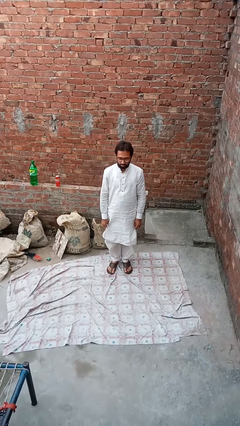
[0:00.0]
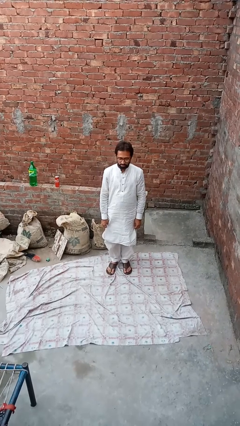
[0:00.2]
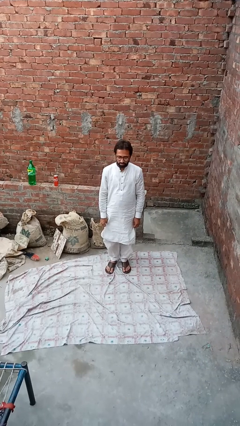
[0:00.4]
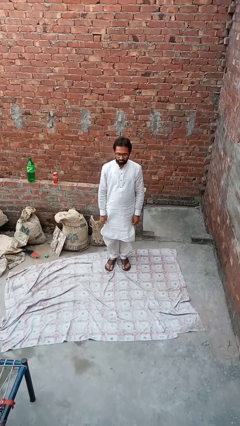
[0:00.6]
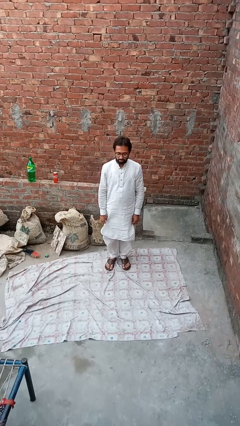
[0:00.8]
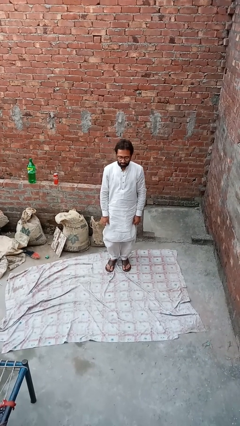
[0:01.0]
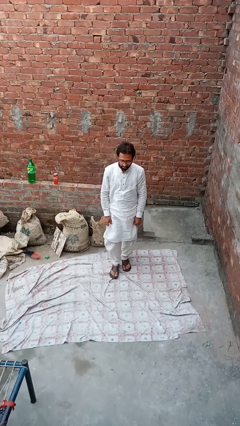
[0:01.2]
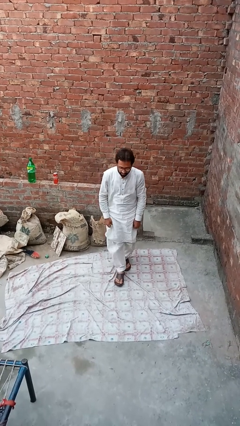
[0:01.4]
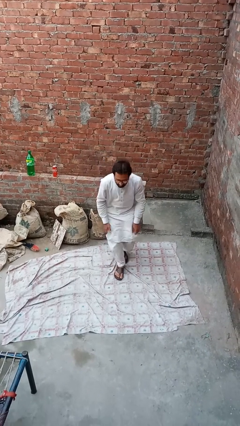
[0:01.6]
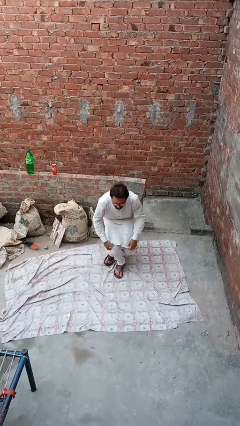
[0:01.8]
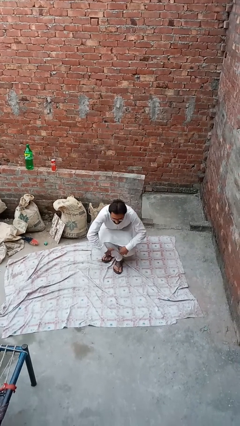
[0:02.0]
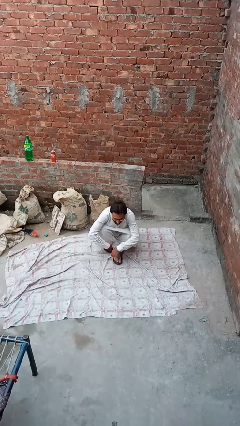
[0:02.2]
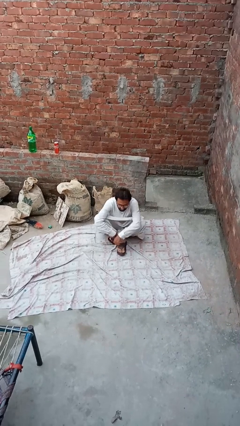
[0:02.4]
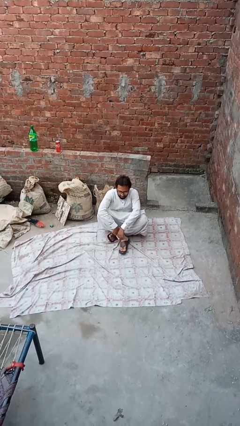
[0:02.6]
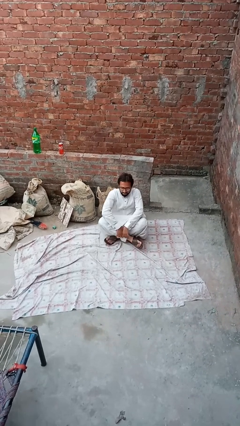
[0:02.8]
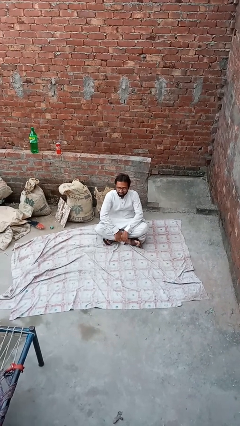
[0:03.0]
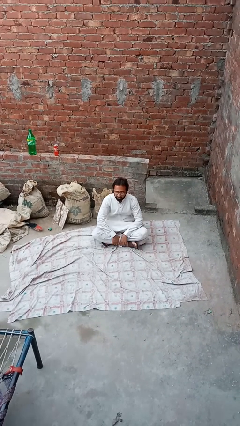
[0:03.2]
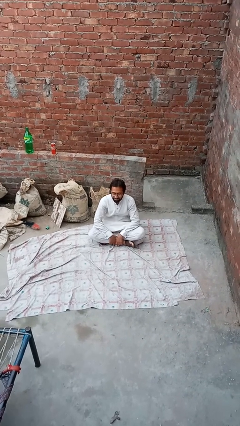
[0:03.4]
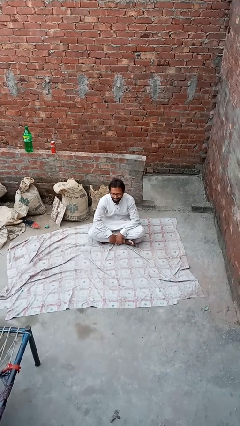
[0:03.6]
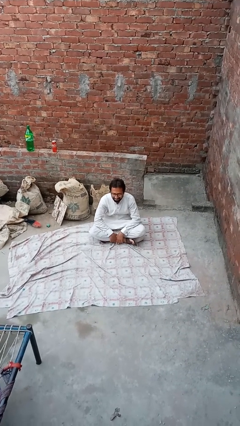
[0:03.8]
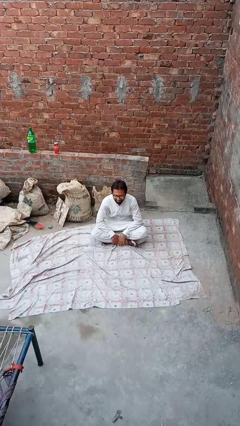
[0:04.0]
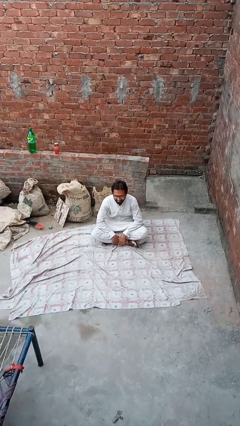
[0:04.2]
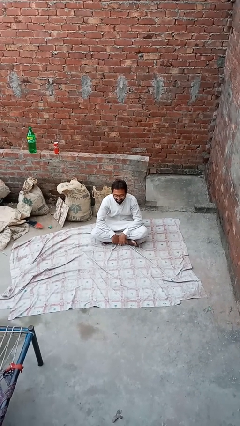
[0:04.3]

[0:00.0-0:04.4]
person sits crisscross

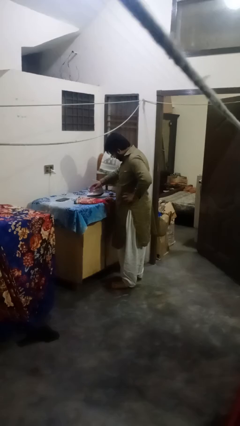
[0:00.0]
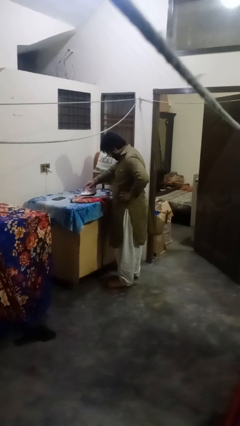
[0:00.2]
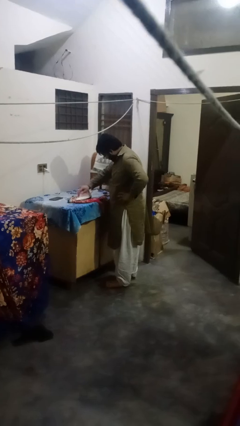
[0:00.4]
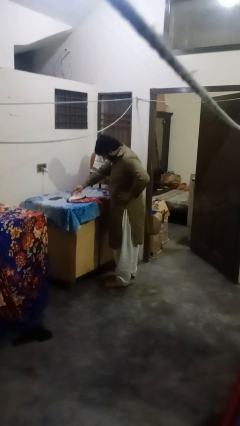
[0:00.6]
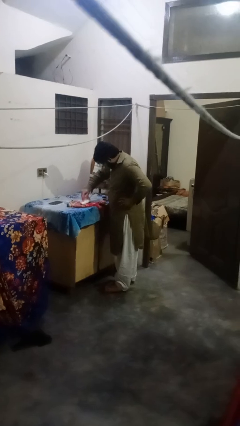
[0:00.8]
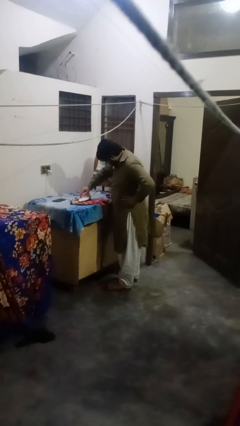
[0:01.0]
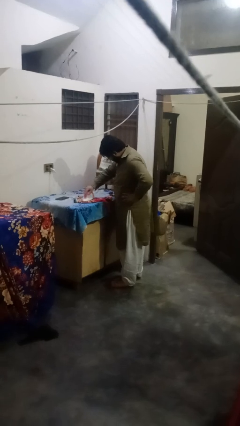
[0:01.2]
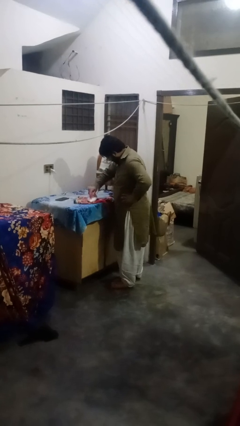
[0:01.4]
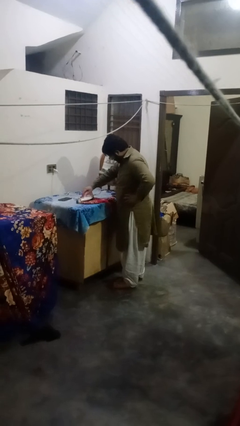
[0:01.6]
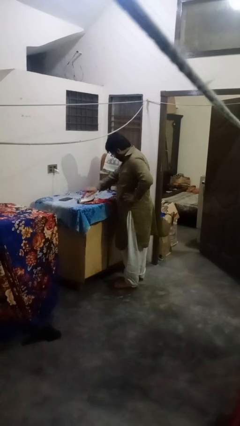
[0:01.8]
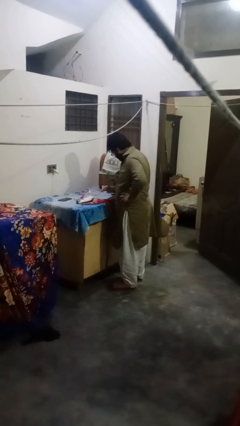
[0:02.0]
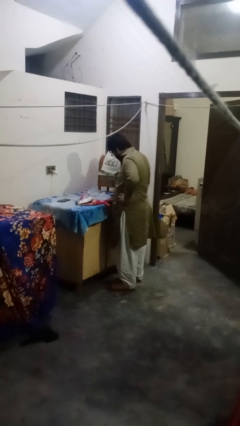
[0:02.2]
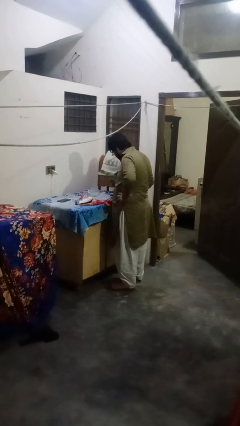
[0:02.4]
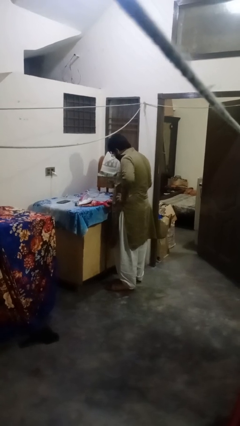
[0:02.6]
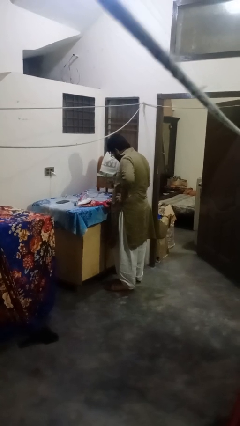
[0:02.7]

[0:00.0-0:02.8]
person irons clothes

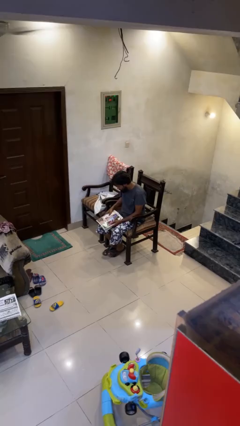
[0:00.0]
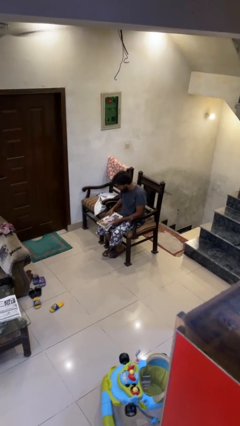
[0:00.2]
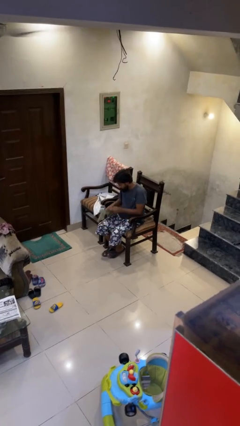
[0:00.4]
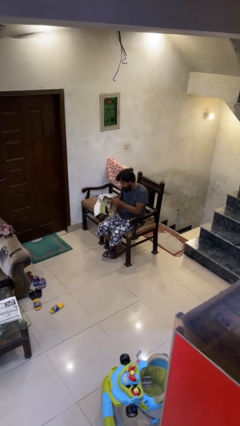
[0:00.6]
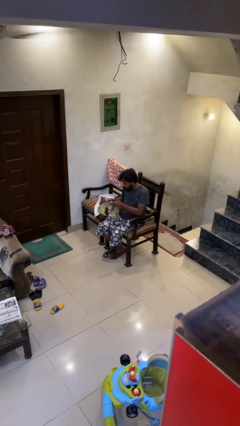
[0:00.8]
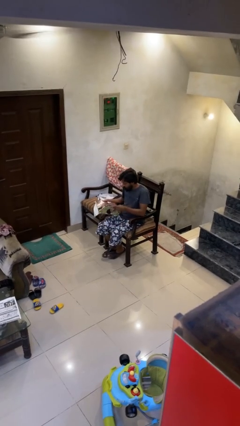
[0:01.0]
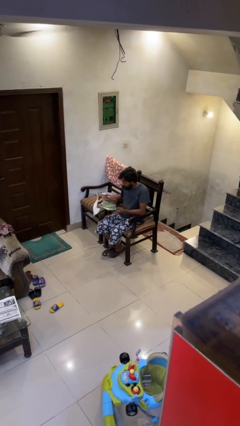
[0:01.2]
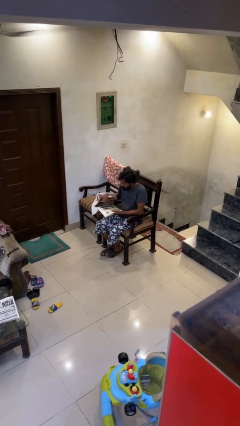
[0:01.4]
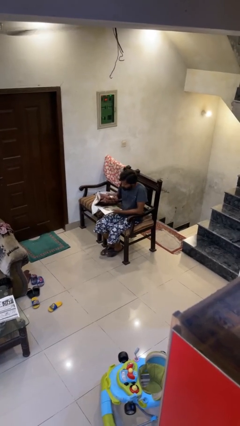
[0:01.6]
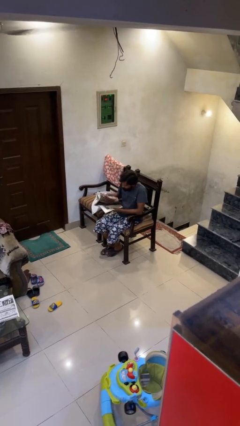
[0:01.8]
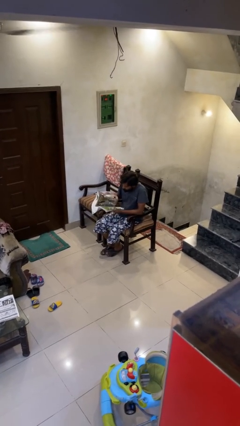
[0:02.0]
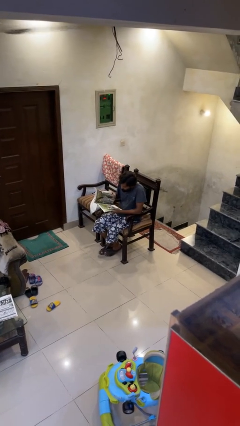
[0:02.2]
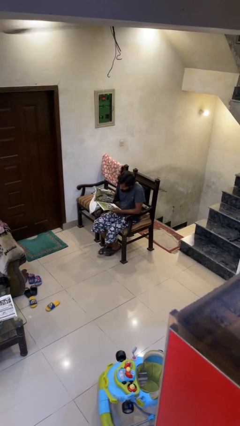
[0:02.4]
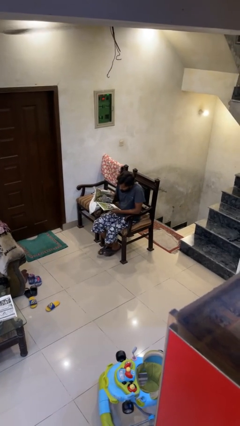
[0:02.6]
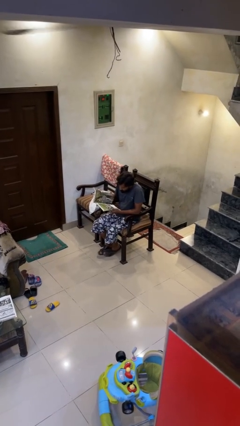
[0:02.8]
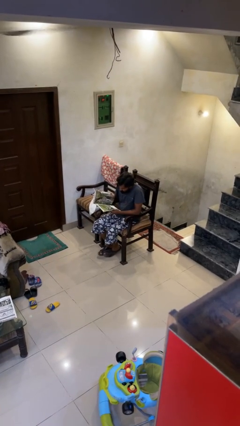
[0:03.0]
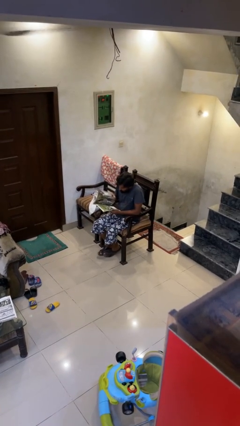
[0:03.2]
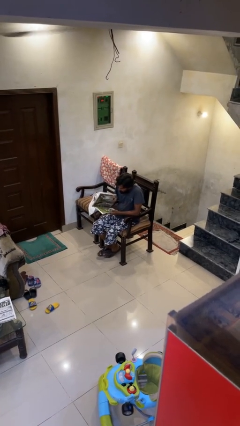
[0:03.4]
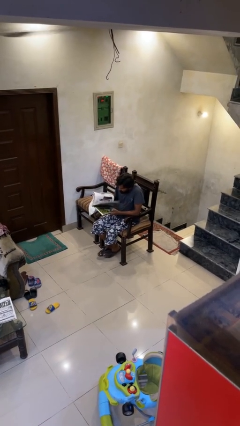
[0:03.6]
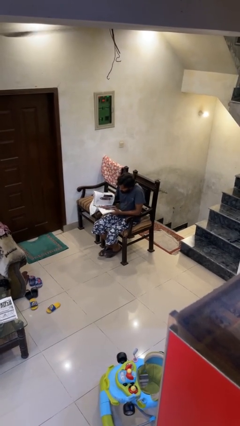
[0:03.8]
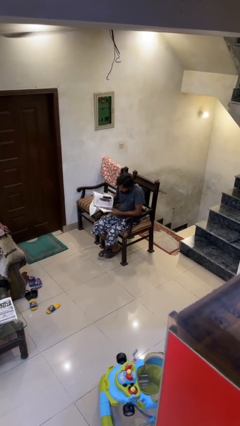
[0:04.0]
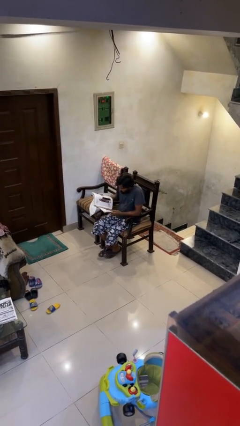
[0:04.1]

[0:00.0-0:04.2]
person reads magazine

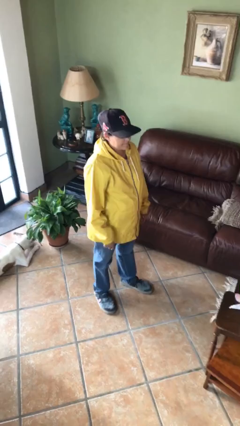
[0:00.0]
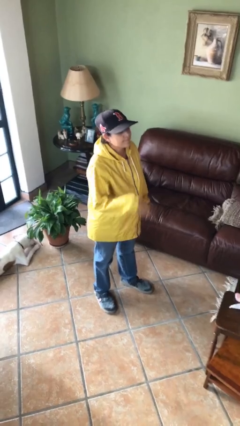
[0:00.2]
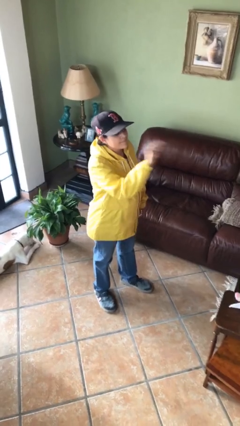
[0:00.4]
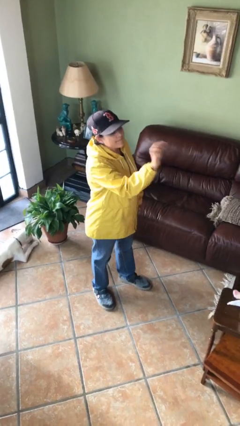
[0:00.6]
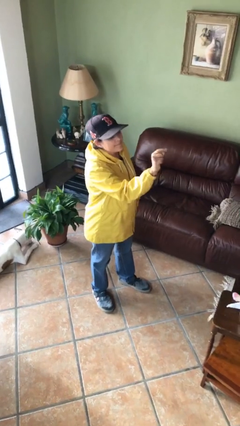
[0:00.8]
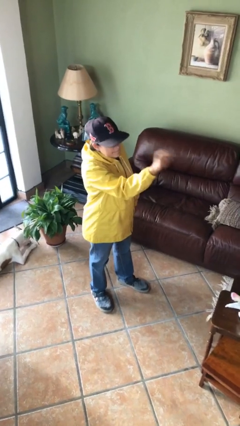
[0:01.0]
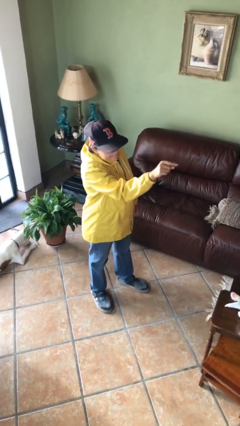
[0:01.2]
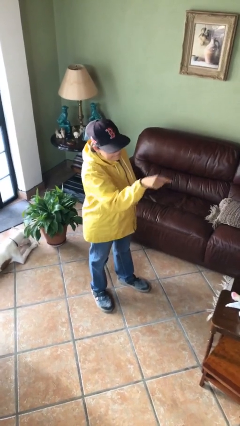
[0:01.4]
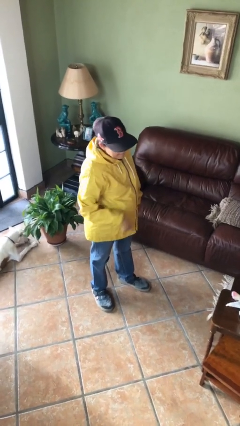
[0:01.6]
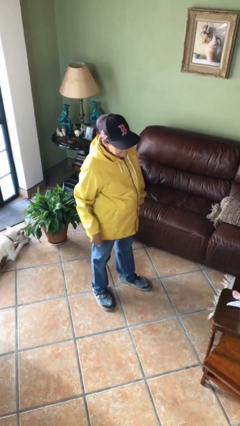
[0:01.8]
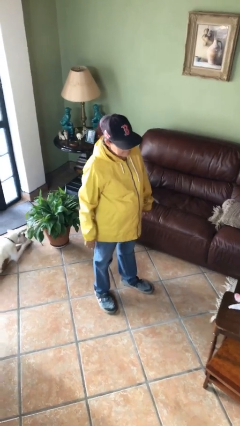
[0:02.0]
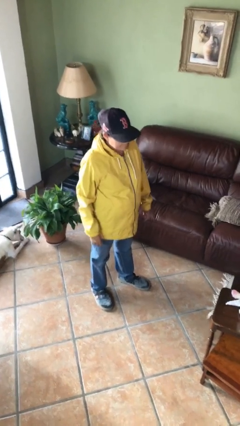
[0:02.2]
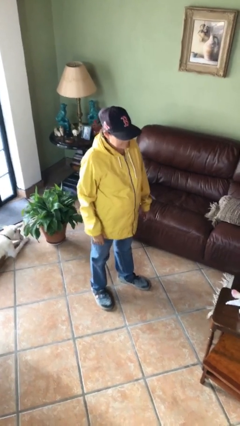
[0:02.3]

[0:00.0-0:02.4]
person points at person

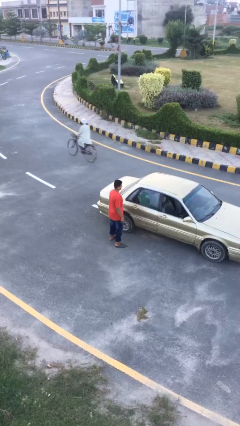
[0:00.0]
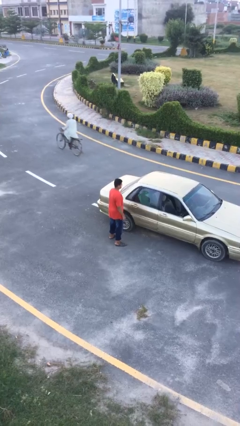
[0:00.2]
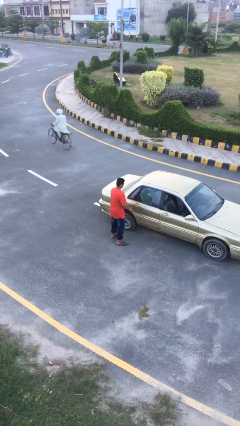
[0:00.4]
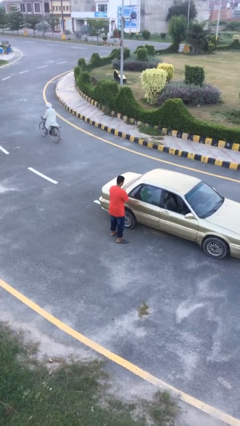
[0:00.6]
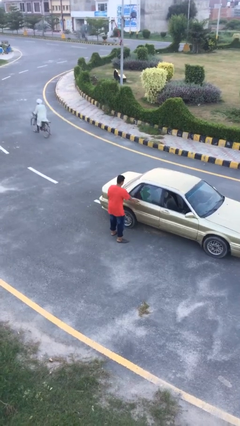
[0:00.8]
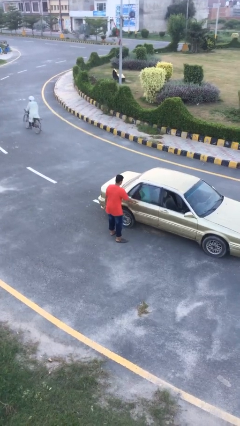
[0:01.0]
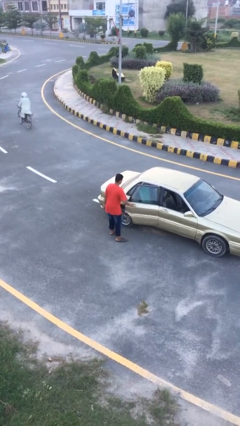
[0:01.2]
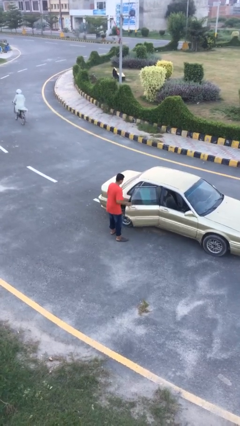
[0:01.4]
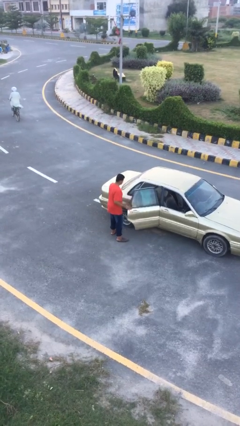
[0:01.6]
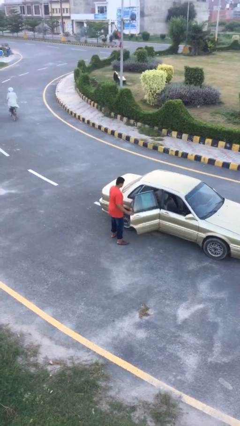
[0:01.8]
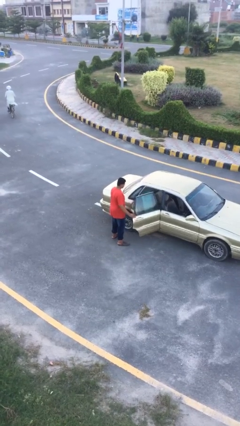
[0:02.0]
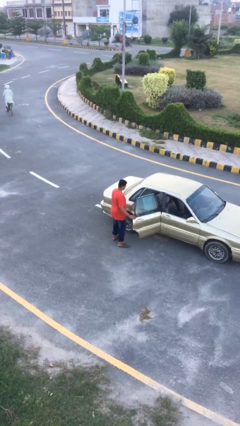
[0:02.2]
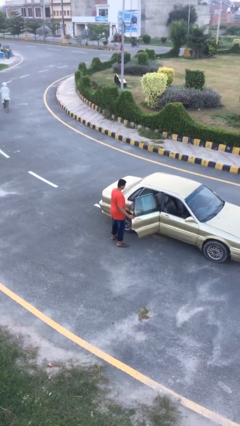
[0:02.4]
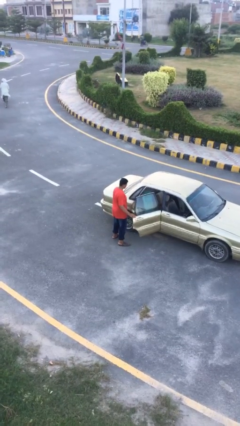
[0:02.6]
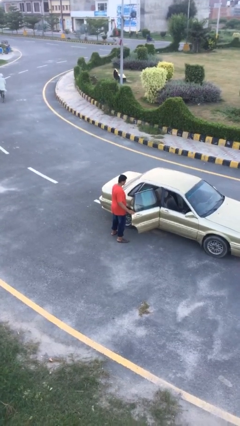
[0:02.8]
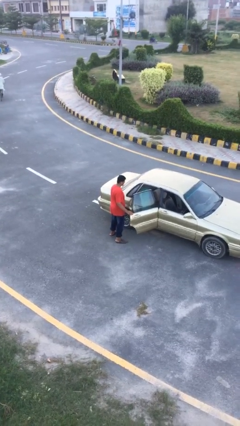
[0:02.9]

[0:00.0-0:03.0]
person opens car door

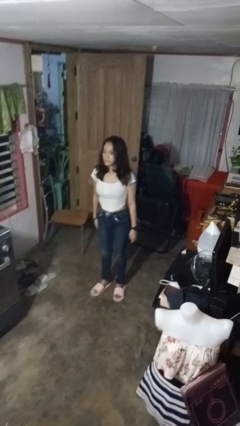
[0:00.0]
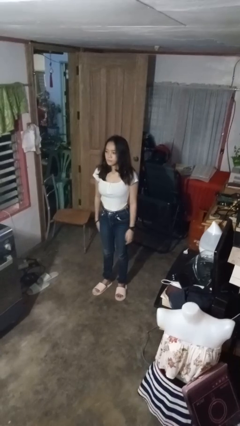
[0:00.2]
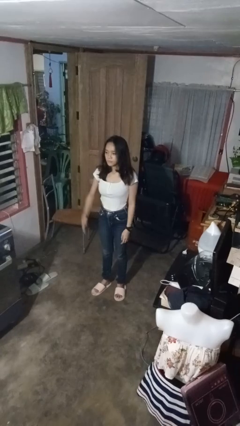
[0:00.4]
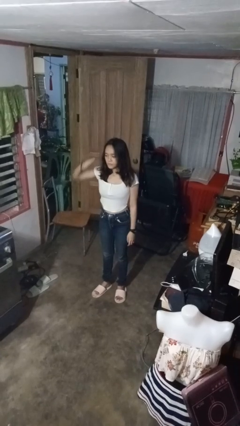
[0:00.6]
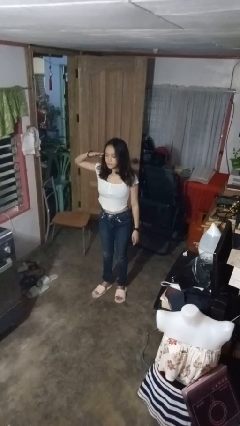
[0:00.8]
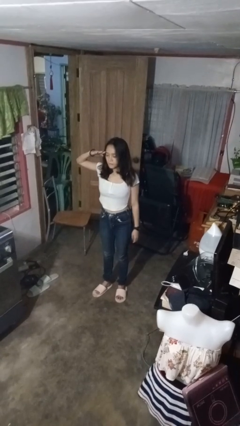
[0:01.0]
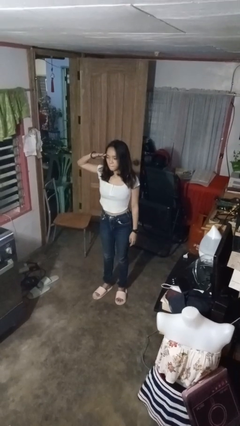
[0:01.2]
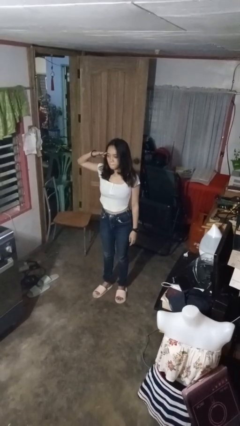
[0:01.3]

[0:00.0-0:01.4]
person salutes
